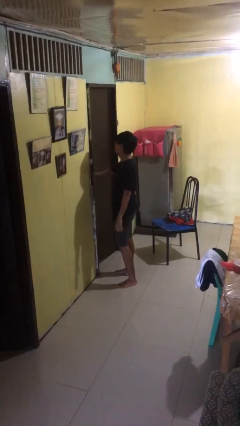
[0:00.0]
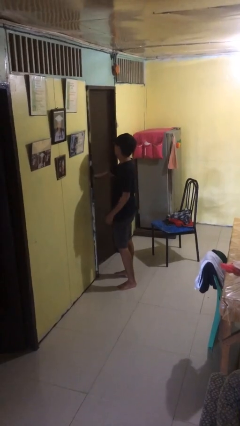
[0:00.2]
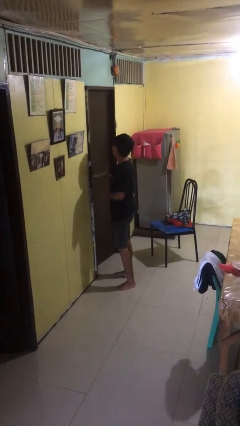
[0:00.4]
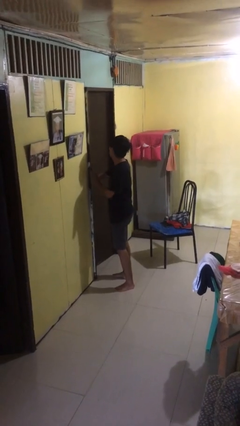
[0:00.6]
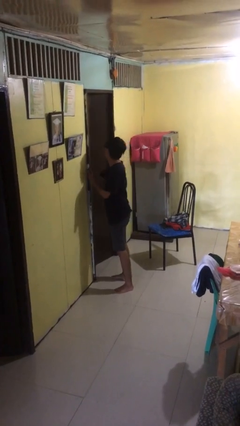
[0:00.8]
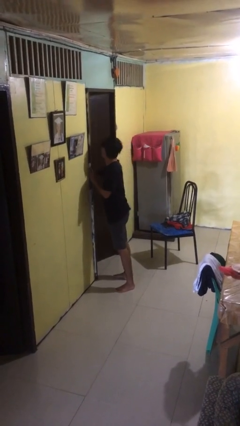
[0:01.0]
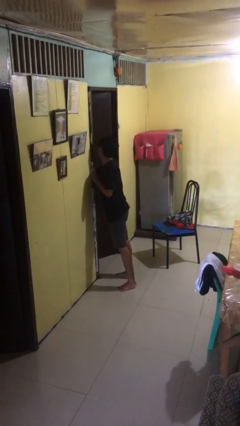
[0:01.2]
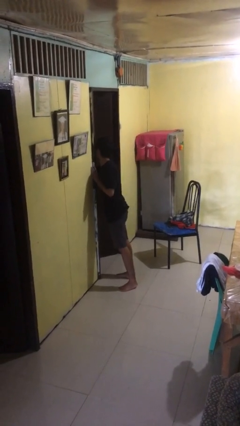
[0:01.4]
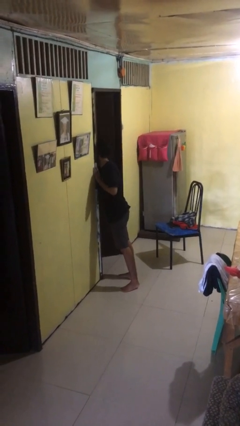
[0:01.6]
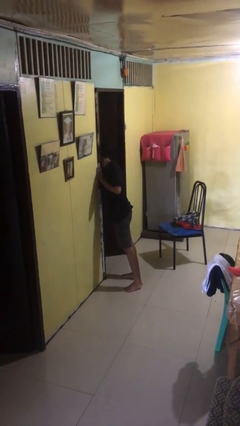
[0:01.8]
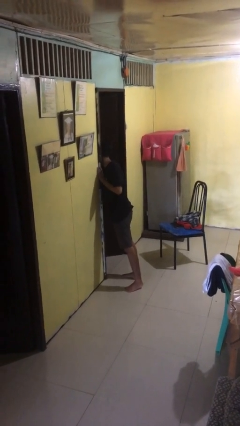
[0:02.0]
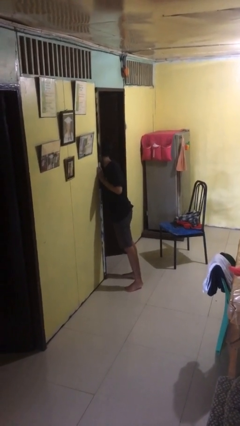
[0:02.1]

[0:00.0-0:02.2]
person opens facility door

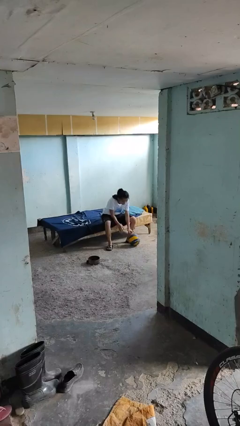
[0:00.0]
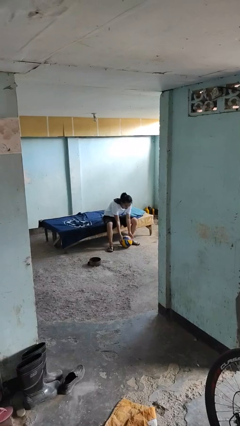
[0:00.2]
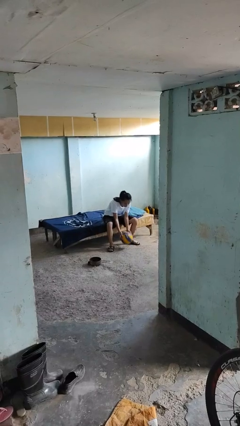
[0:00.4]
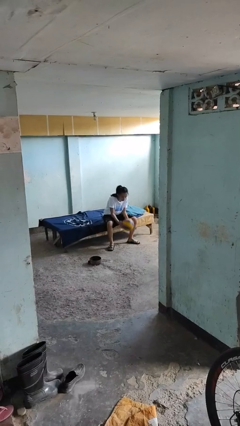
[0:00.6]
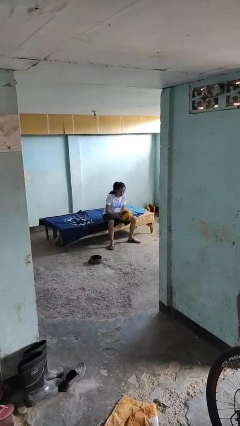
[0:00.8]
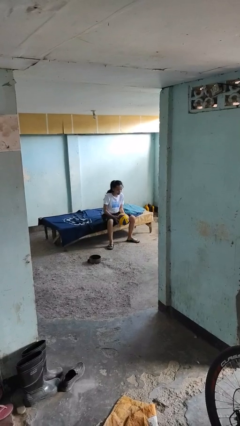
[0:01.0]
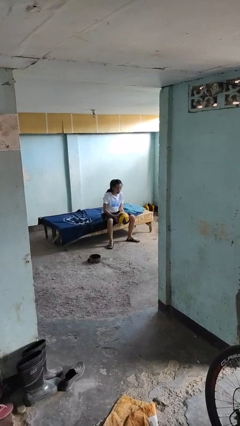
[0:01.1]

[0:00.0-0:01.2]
person picks up object from floor

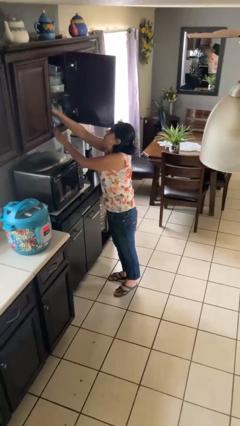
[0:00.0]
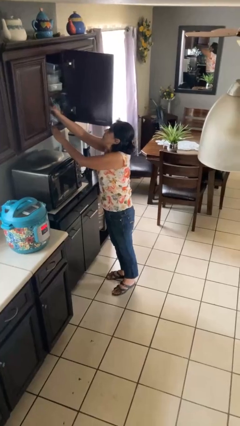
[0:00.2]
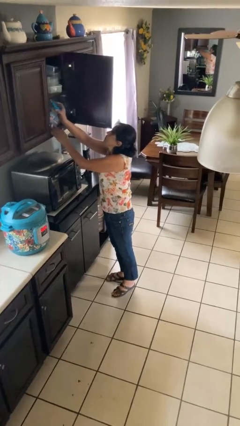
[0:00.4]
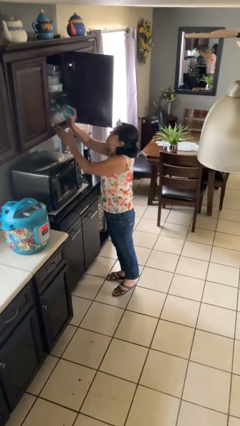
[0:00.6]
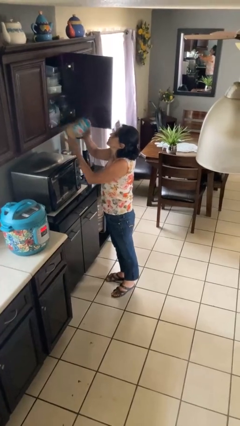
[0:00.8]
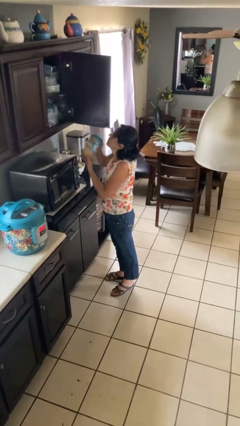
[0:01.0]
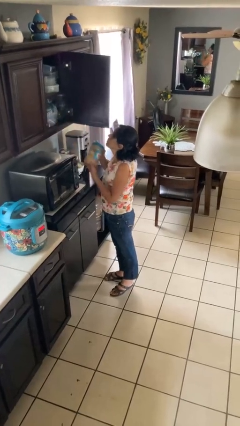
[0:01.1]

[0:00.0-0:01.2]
person picks up object from cabinet

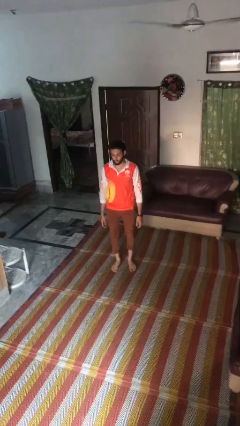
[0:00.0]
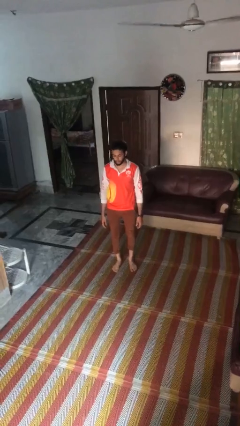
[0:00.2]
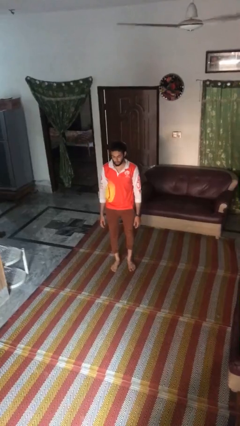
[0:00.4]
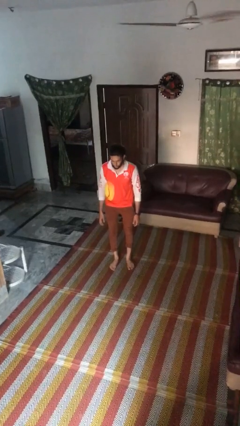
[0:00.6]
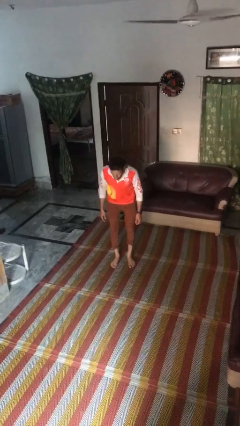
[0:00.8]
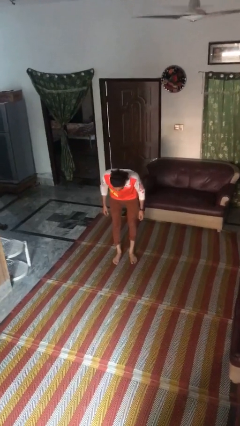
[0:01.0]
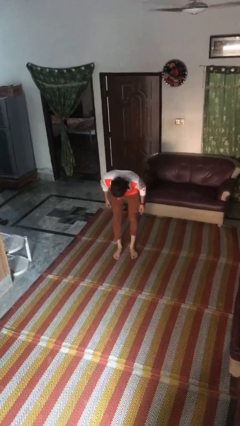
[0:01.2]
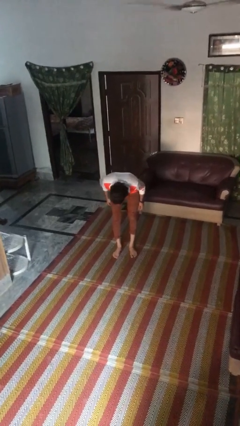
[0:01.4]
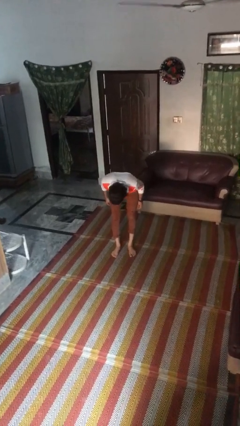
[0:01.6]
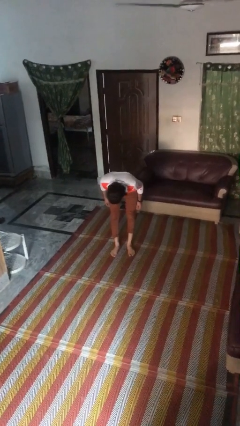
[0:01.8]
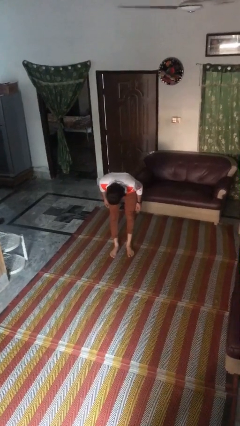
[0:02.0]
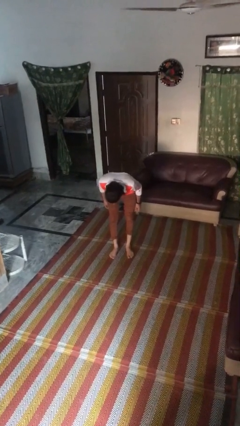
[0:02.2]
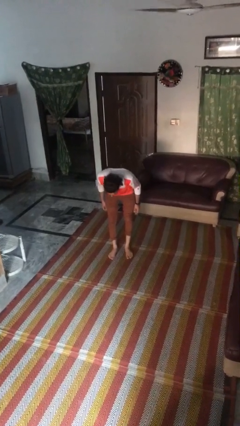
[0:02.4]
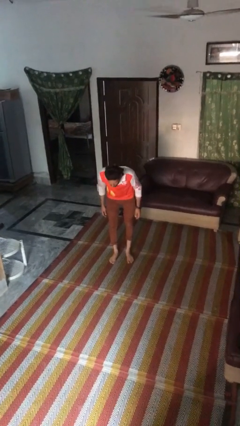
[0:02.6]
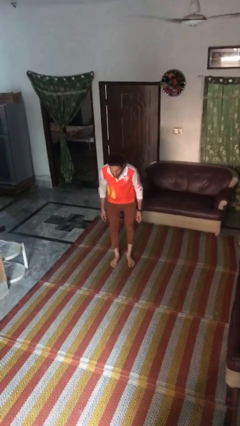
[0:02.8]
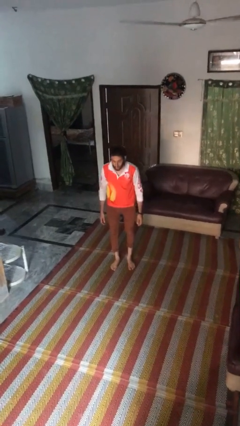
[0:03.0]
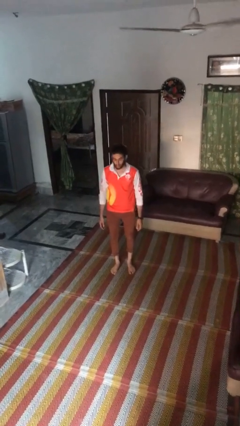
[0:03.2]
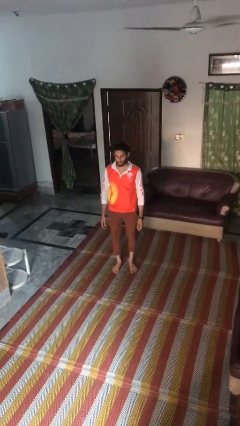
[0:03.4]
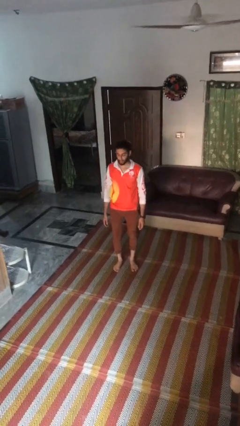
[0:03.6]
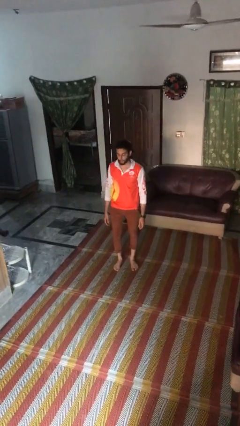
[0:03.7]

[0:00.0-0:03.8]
person bows

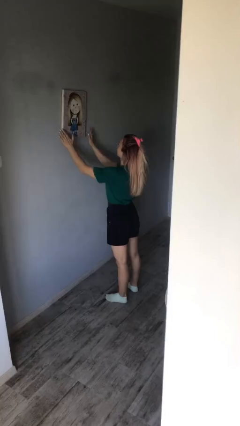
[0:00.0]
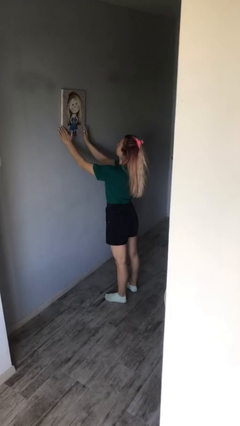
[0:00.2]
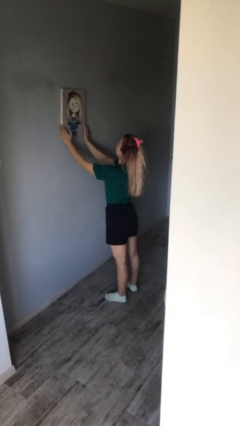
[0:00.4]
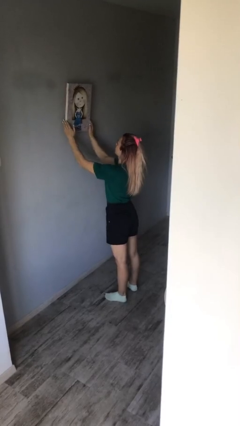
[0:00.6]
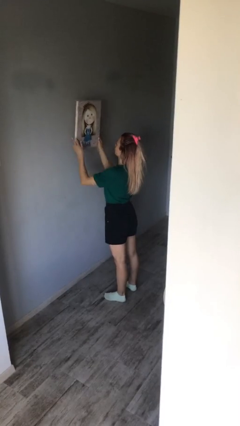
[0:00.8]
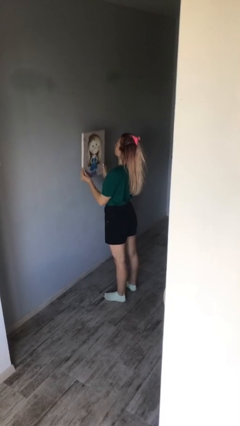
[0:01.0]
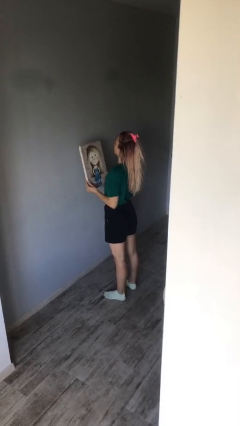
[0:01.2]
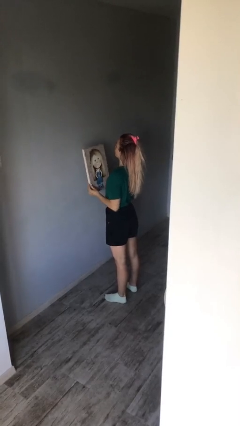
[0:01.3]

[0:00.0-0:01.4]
person takes down picture frame

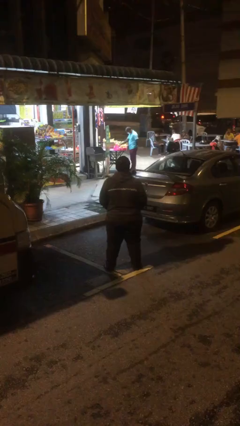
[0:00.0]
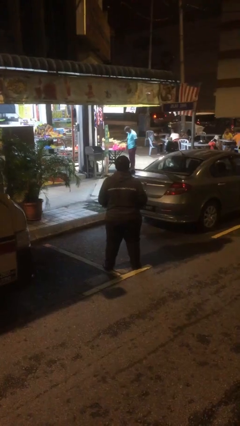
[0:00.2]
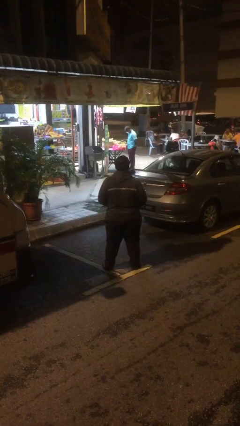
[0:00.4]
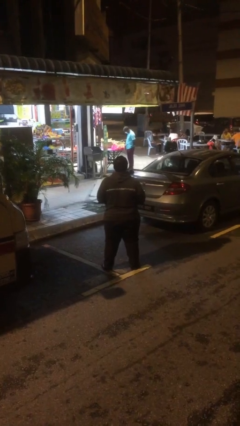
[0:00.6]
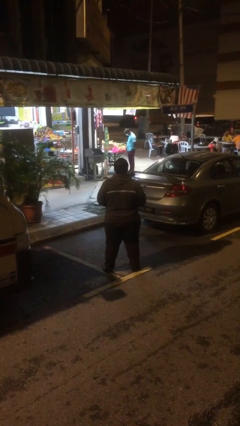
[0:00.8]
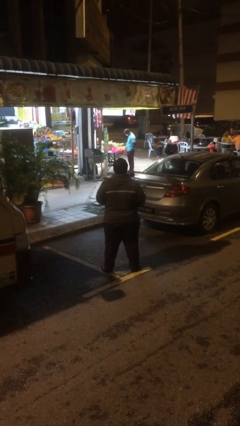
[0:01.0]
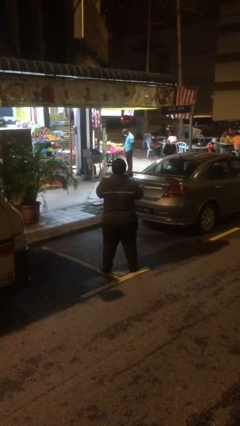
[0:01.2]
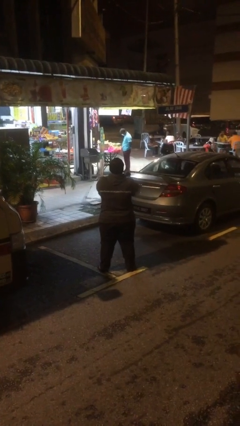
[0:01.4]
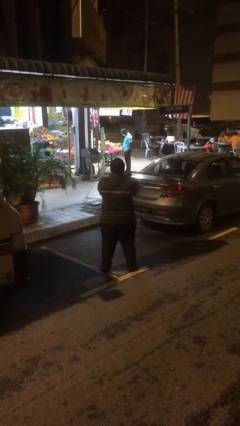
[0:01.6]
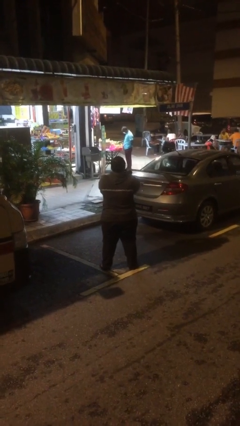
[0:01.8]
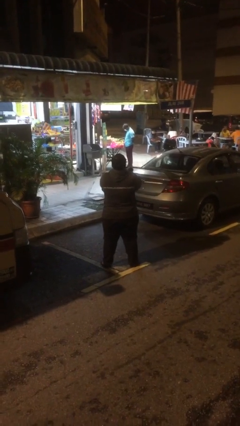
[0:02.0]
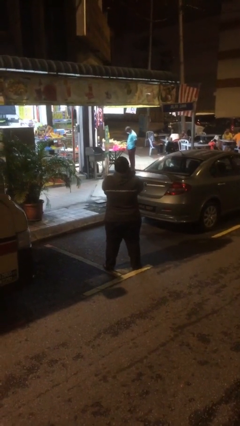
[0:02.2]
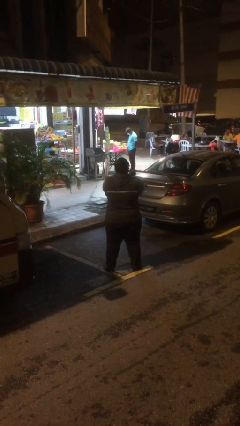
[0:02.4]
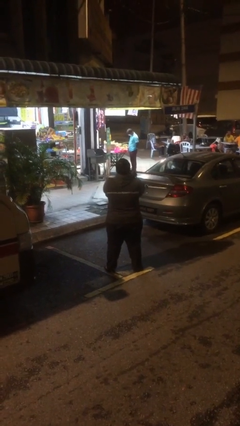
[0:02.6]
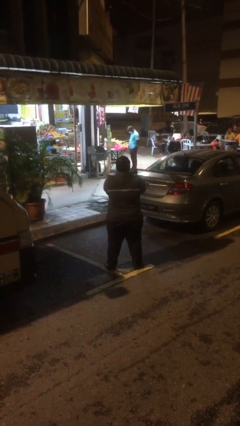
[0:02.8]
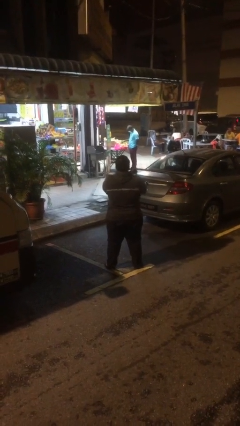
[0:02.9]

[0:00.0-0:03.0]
person blows into hands

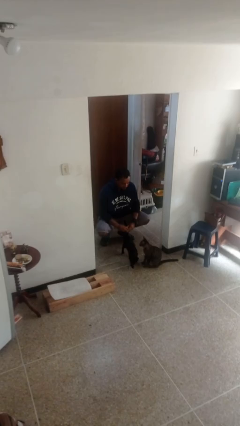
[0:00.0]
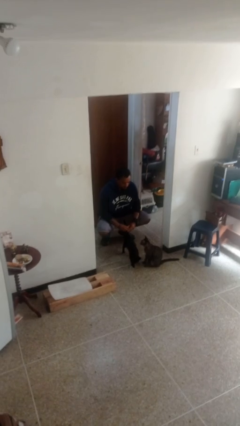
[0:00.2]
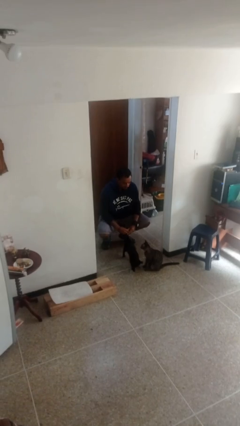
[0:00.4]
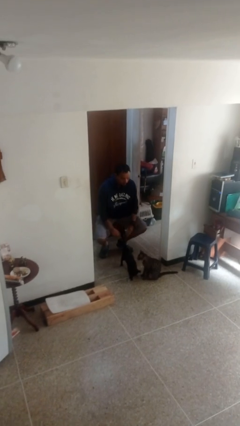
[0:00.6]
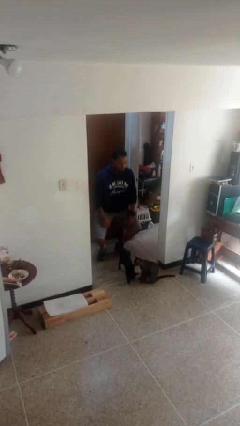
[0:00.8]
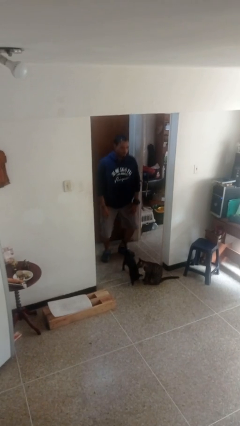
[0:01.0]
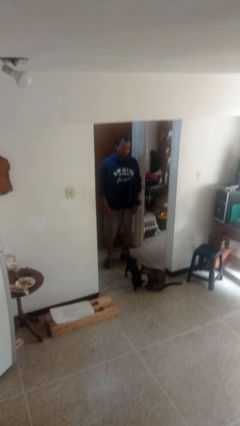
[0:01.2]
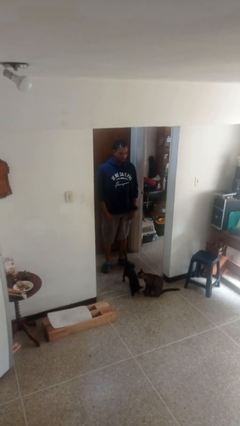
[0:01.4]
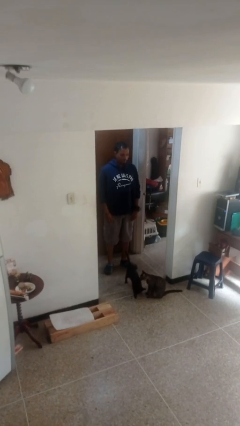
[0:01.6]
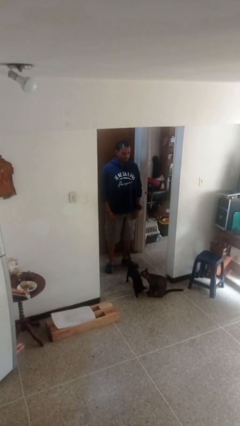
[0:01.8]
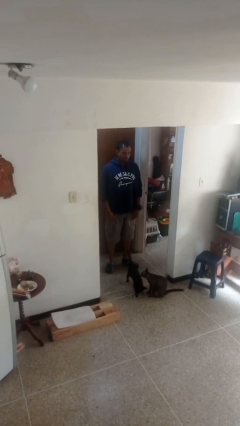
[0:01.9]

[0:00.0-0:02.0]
person stands up

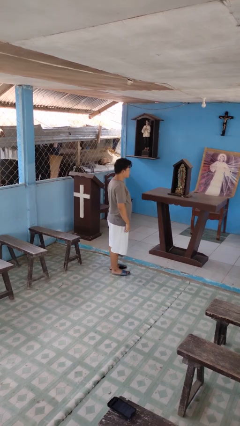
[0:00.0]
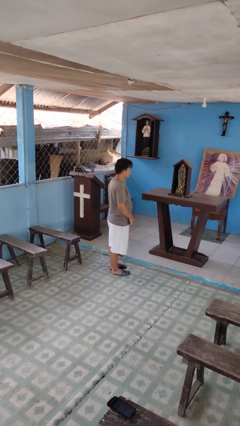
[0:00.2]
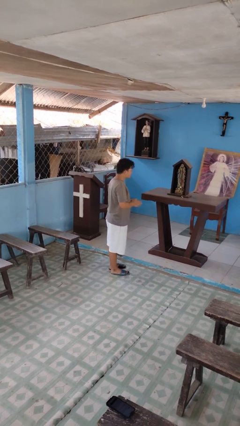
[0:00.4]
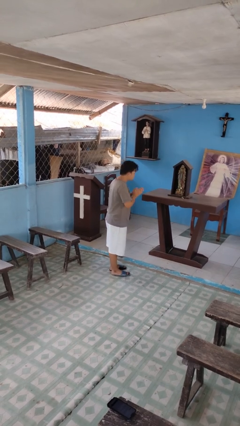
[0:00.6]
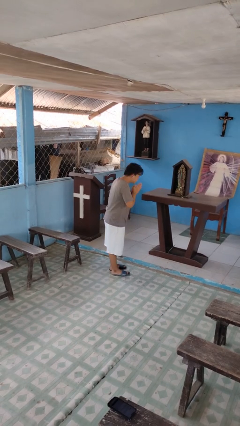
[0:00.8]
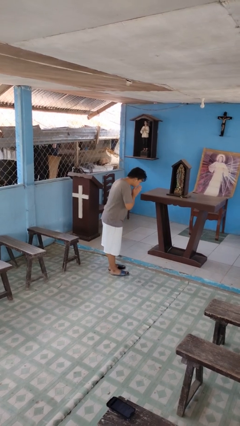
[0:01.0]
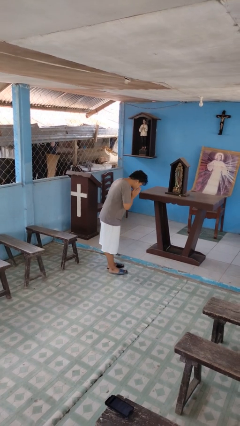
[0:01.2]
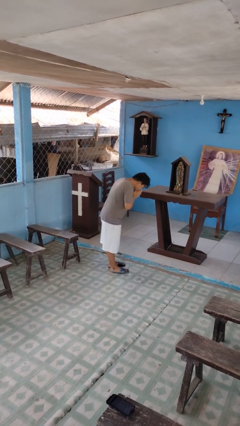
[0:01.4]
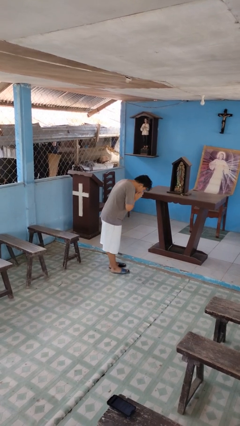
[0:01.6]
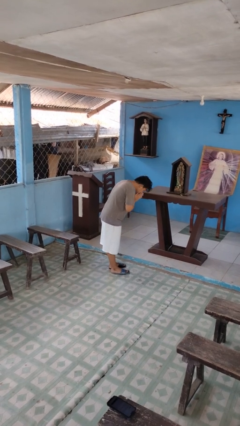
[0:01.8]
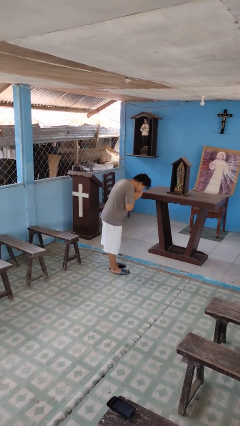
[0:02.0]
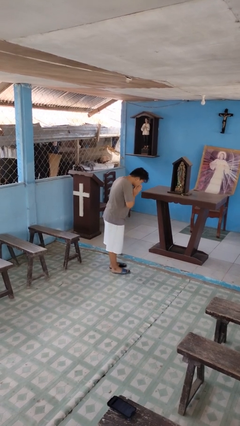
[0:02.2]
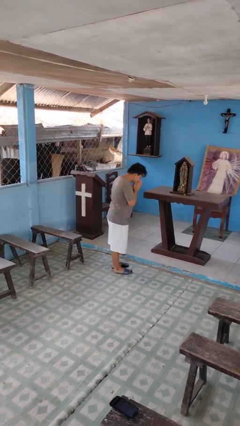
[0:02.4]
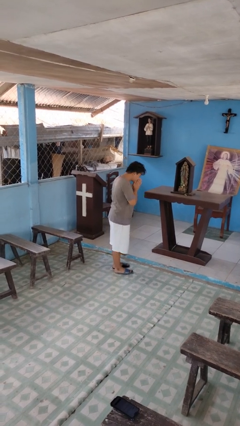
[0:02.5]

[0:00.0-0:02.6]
person prays
